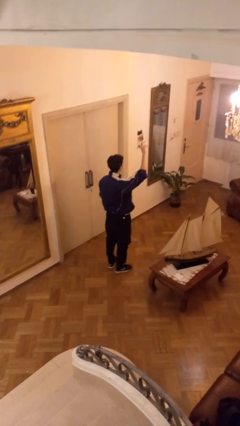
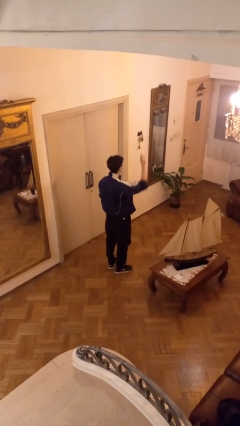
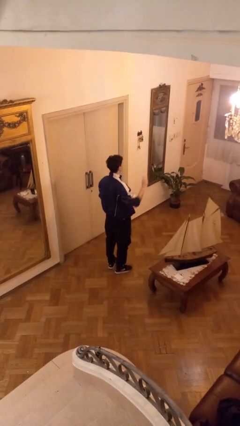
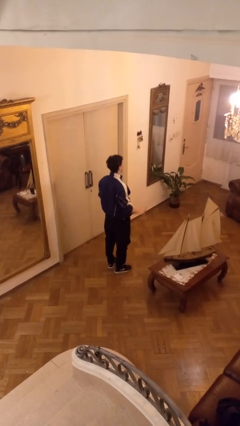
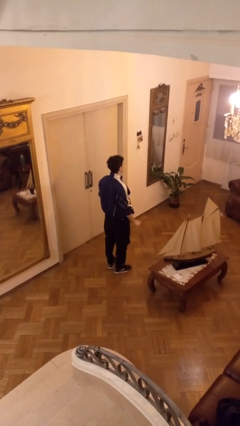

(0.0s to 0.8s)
person gestures lower hand

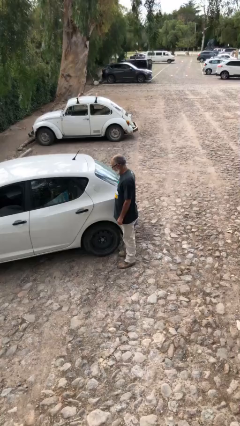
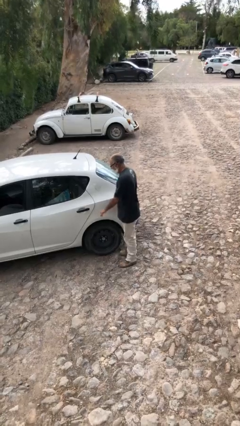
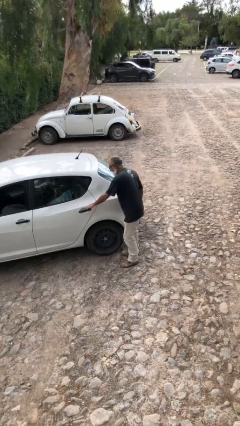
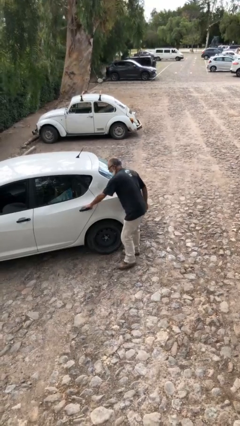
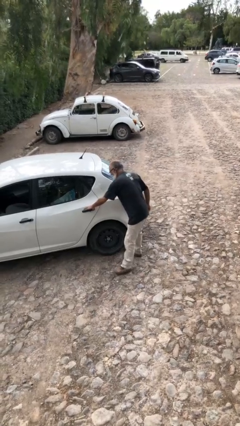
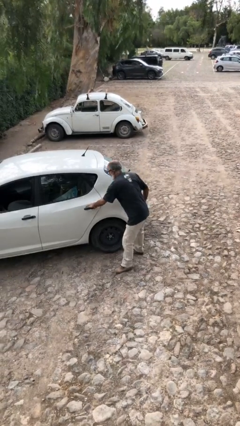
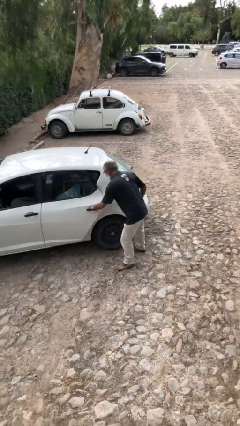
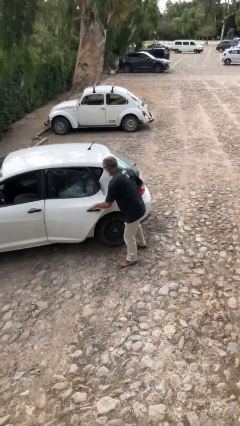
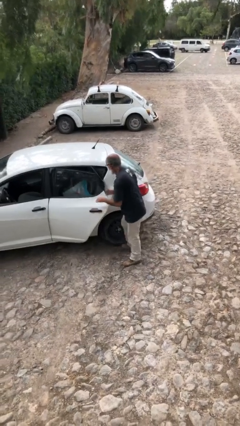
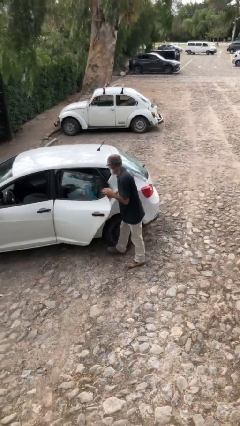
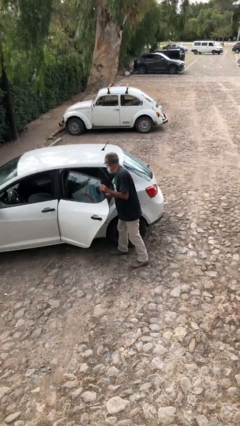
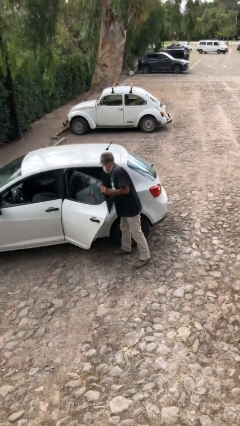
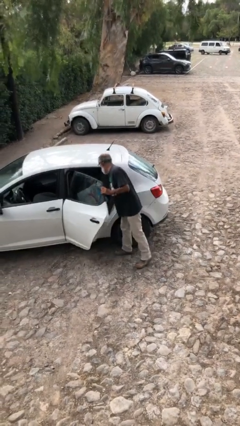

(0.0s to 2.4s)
person opens car door

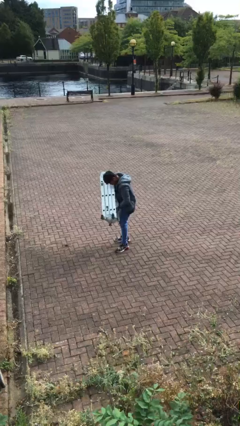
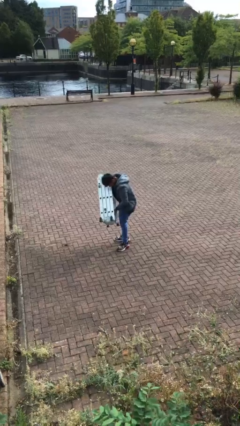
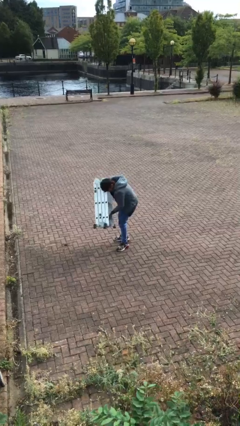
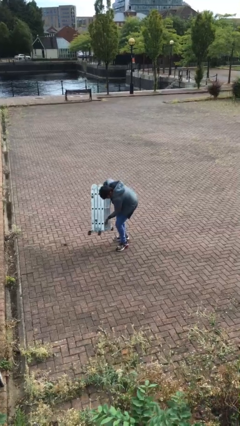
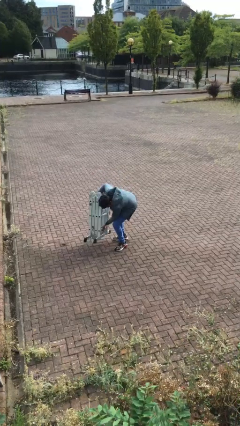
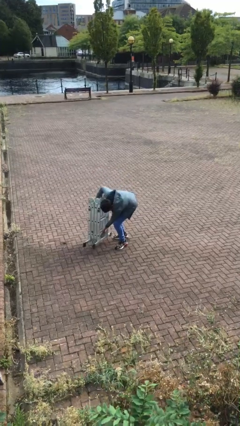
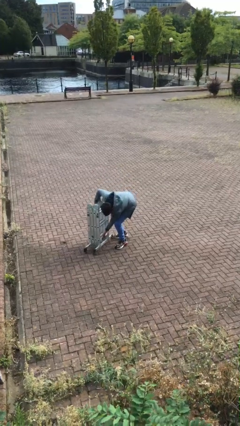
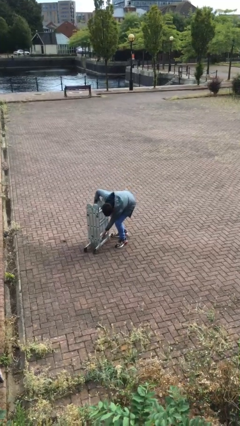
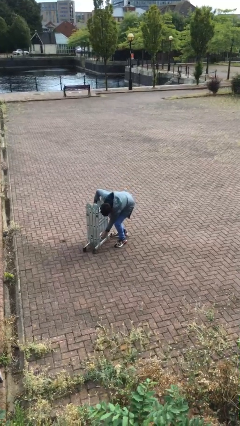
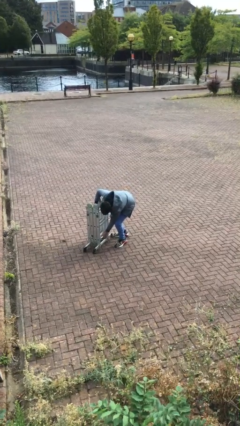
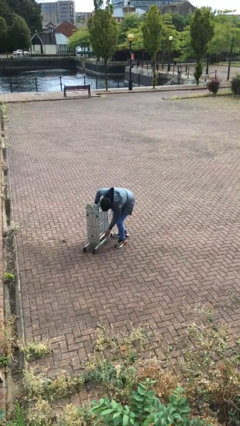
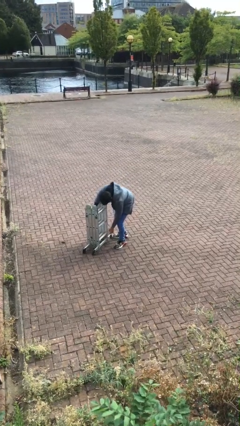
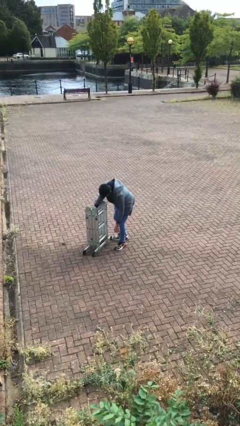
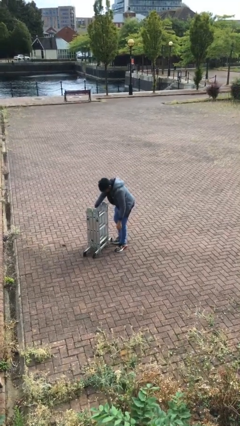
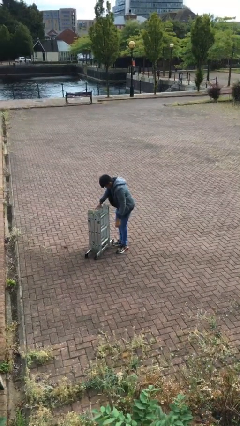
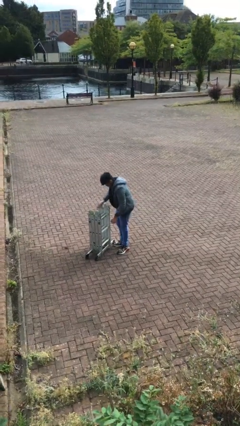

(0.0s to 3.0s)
person puts down object on floor

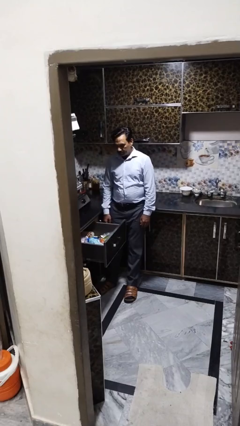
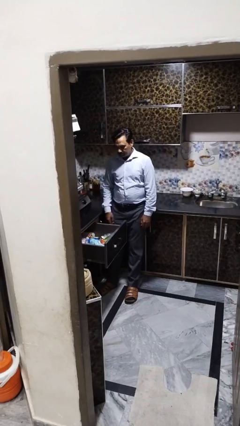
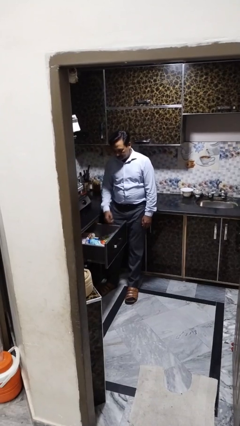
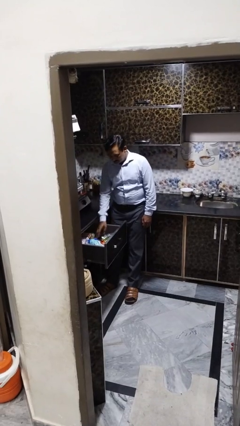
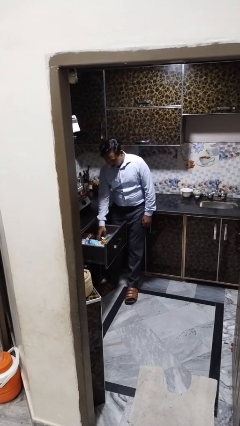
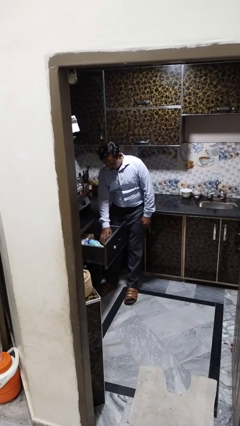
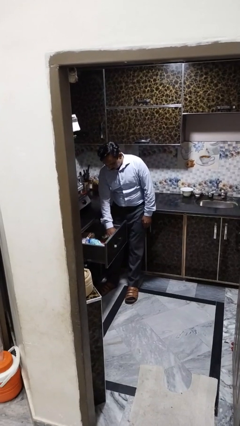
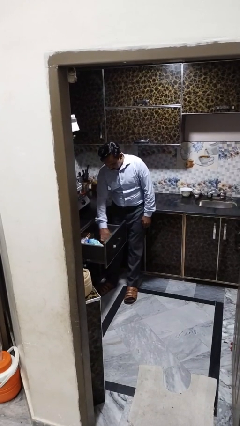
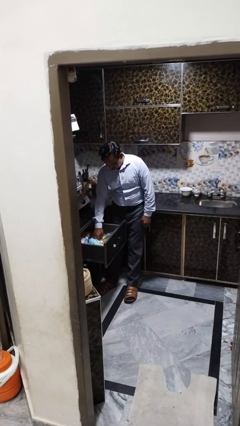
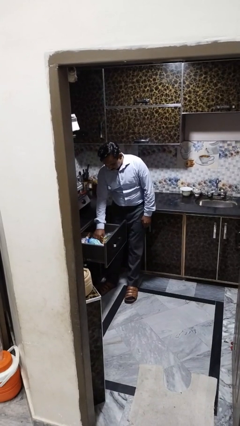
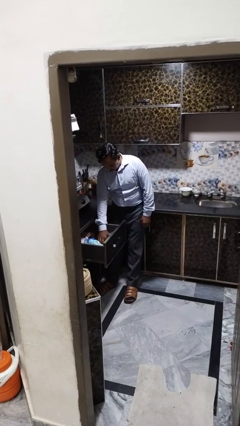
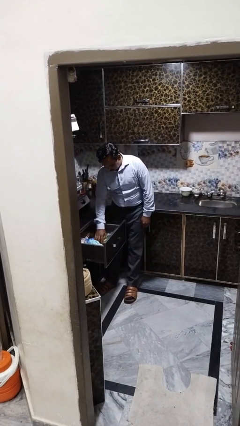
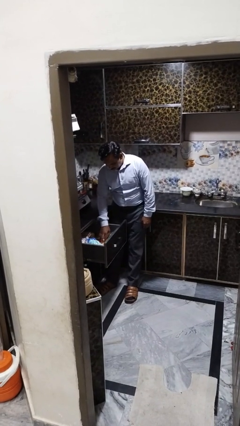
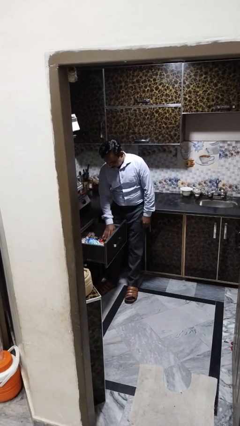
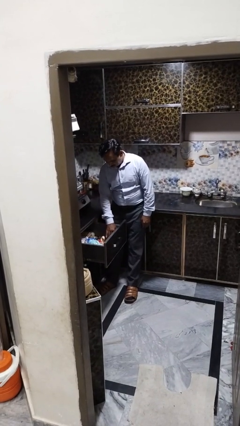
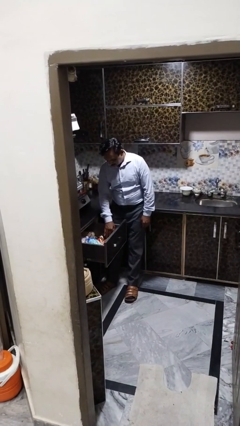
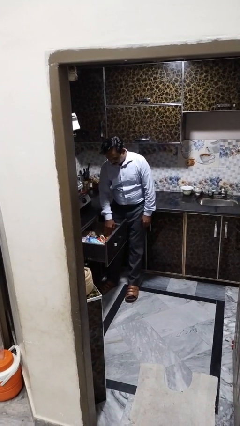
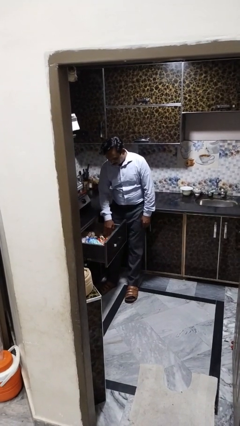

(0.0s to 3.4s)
person searches in kitchen drawer

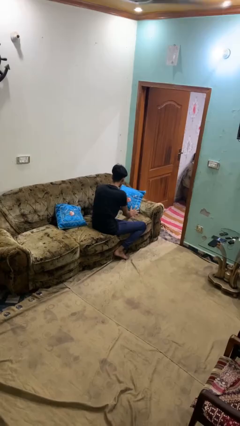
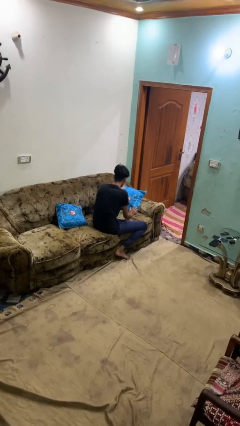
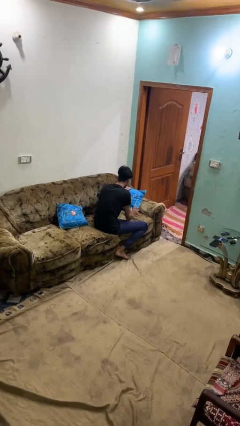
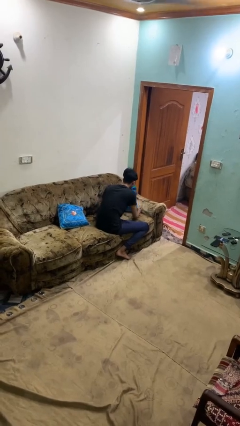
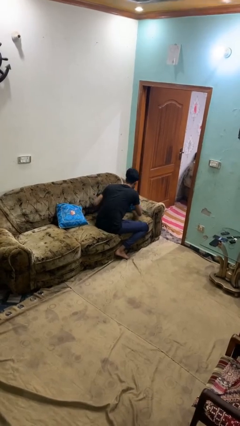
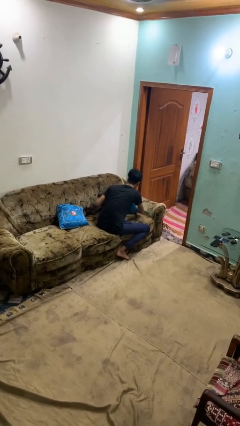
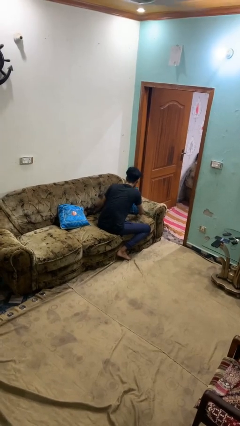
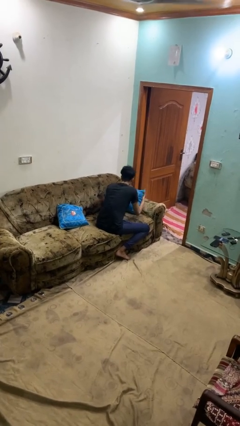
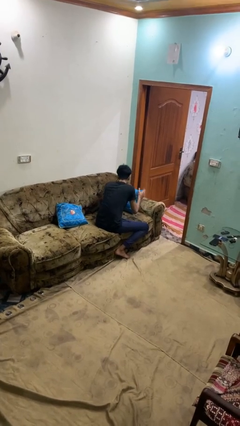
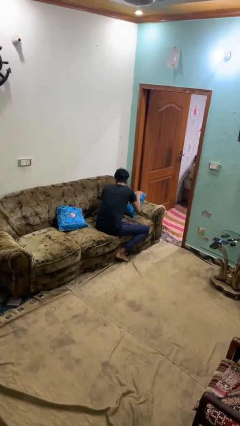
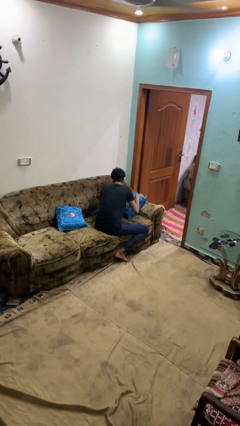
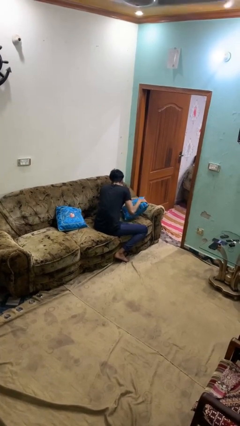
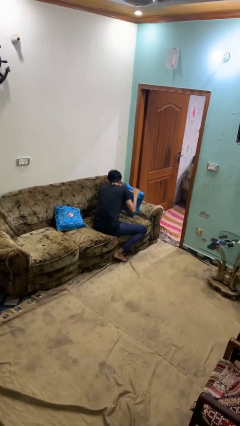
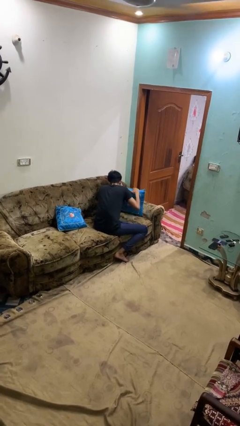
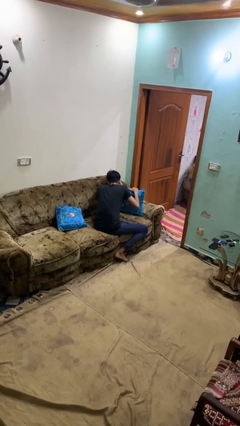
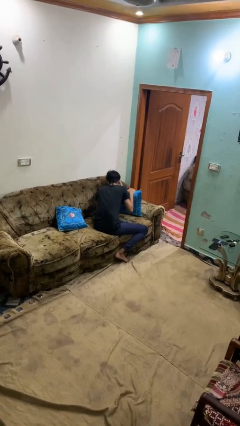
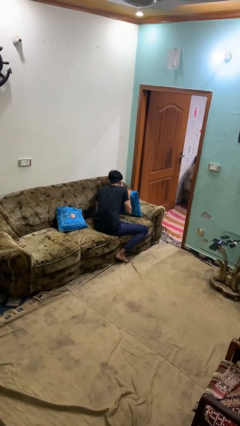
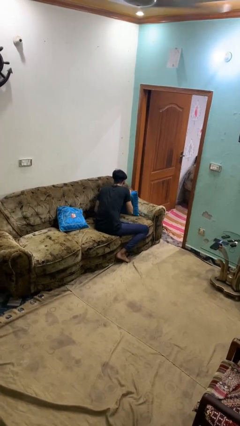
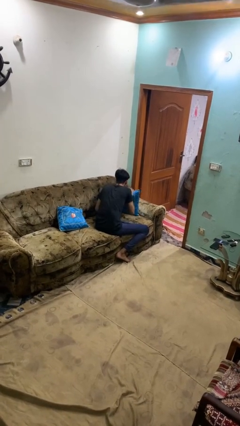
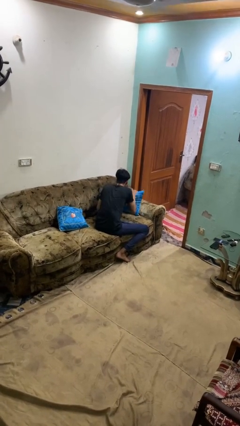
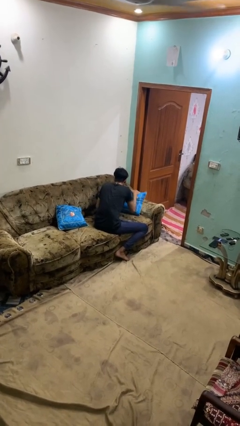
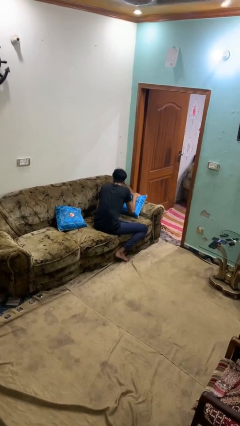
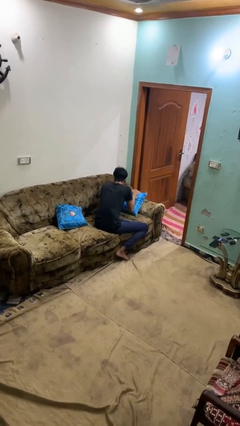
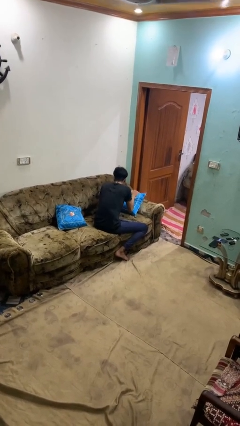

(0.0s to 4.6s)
person searches in couch

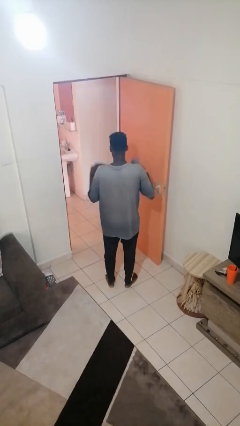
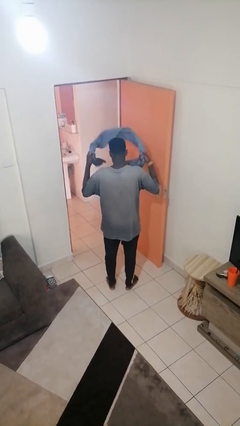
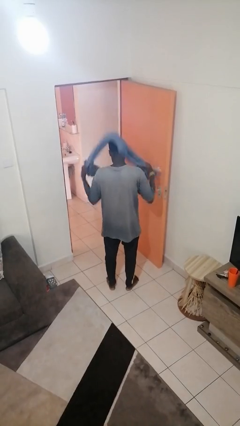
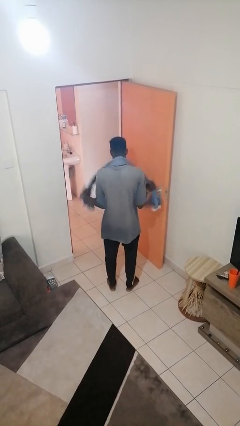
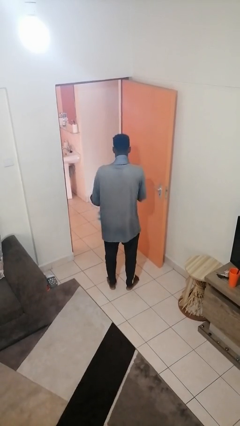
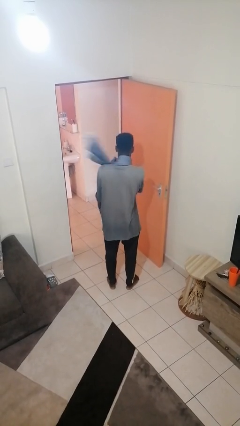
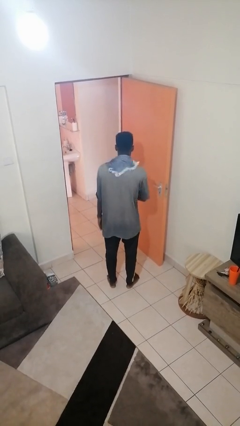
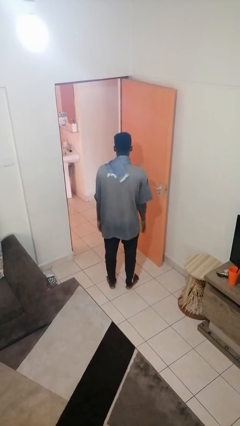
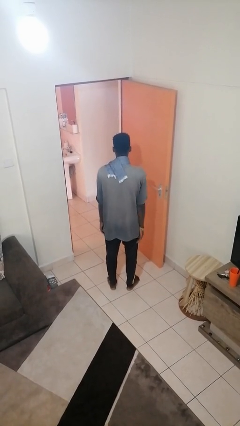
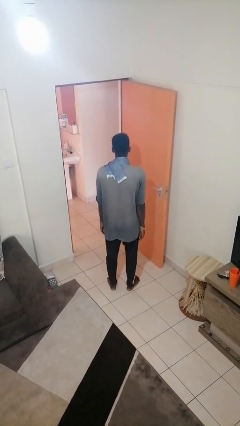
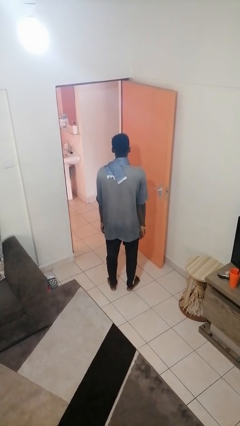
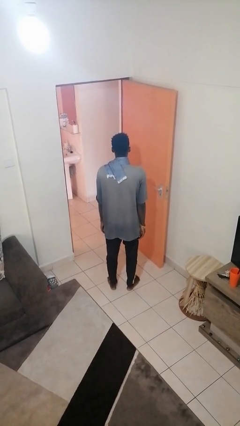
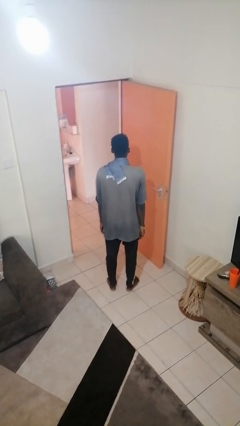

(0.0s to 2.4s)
person puts on scarf

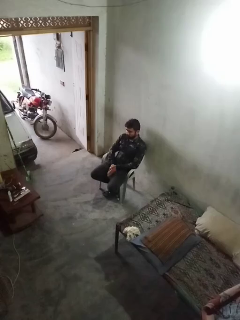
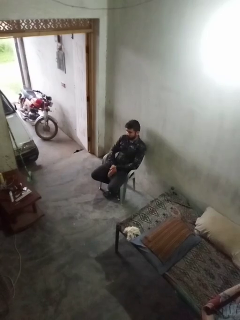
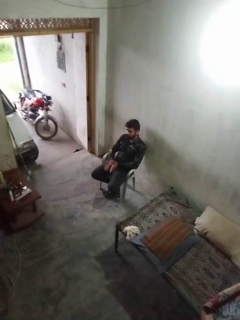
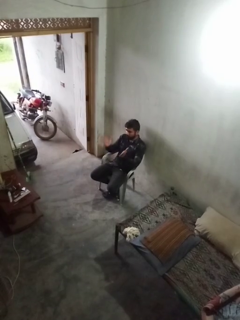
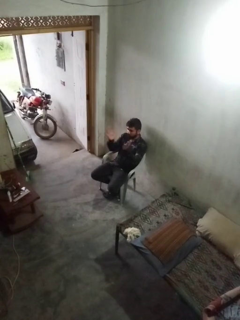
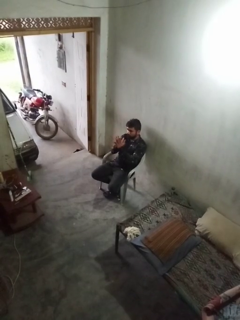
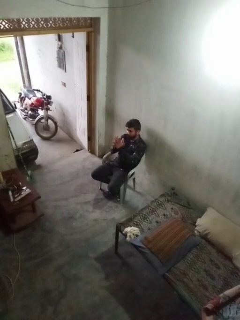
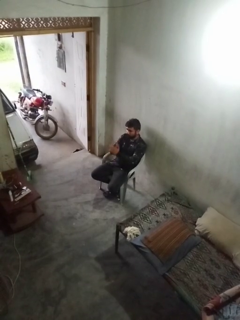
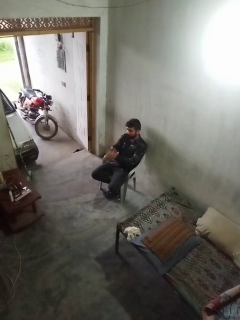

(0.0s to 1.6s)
person claps hands
